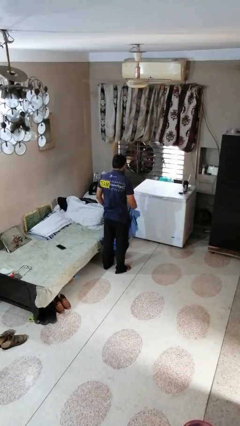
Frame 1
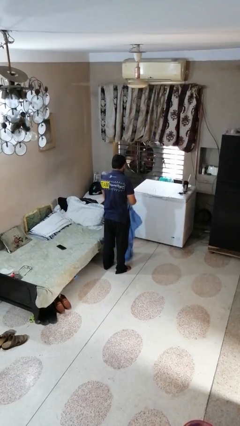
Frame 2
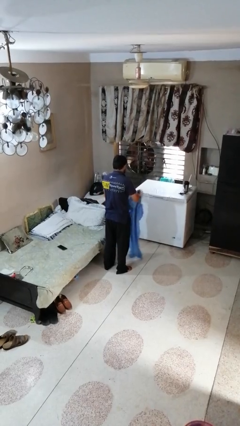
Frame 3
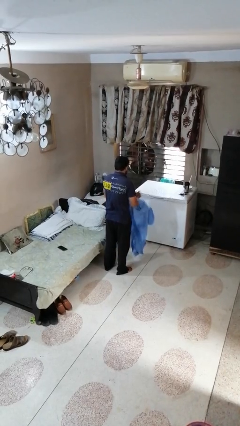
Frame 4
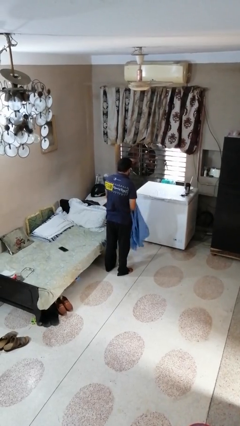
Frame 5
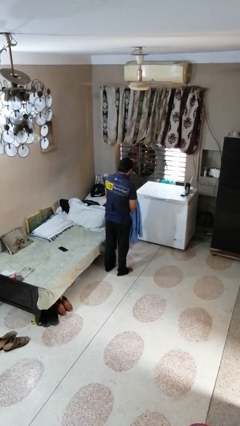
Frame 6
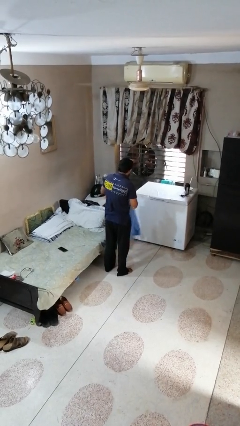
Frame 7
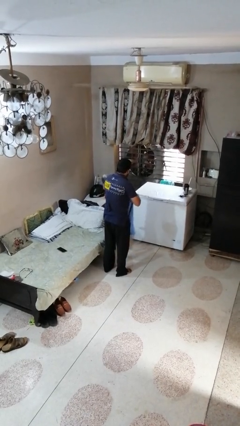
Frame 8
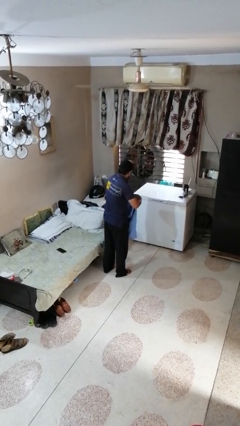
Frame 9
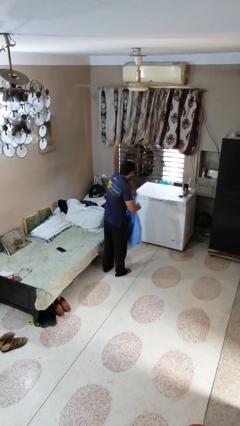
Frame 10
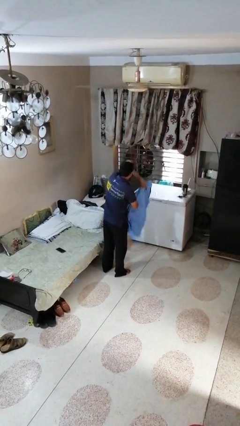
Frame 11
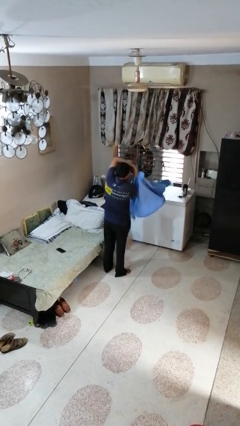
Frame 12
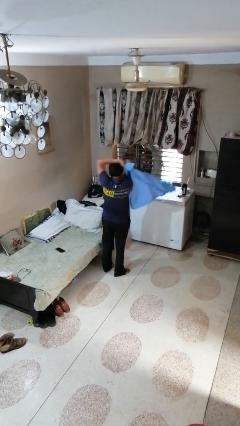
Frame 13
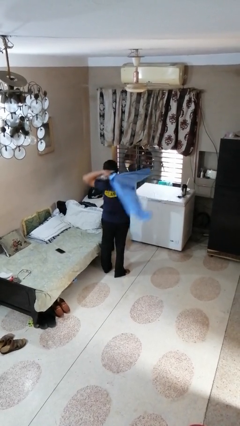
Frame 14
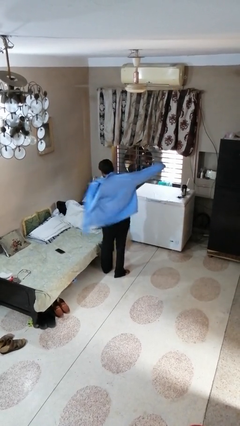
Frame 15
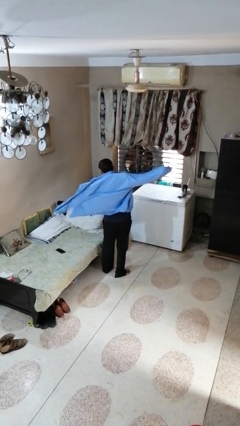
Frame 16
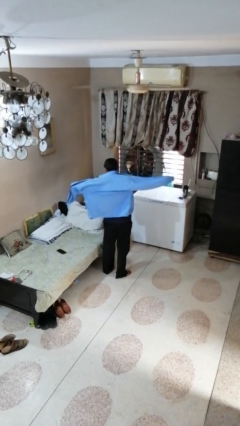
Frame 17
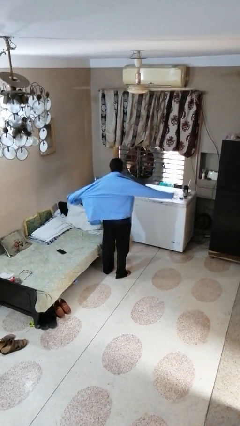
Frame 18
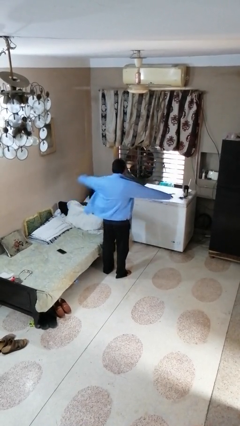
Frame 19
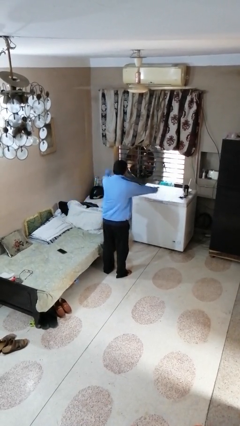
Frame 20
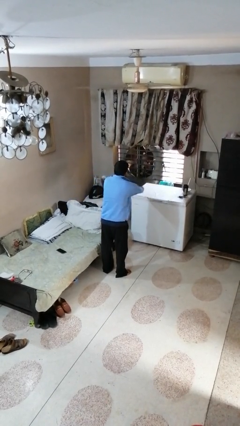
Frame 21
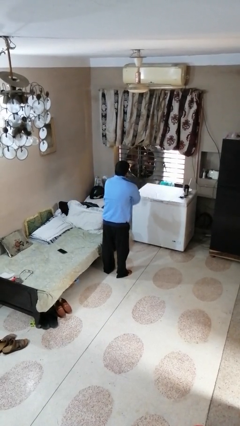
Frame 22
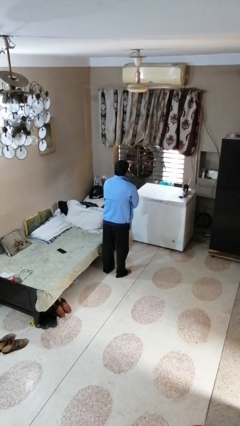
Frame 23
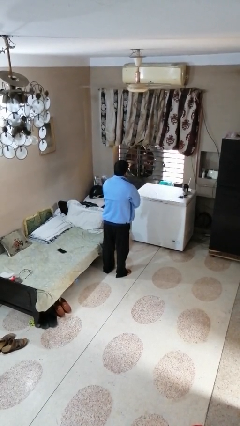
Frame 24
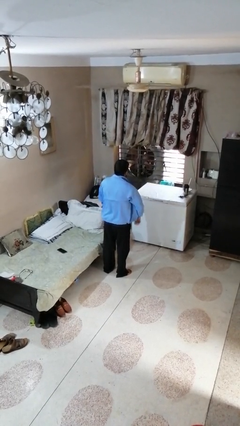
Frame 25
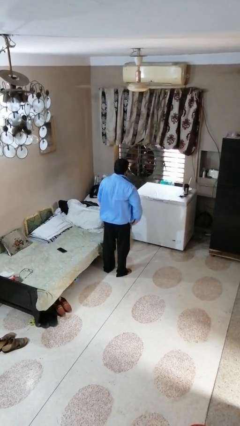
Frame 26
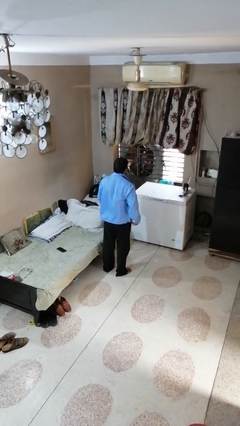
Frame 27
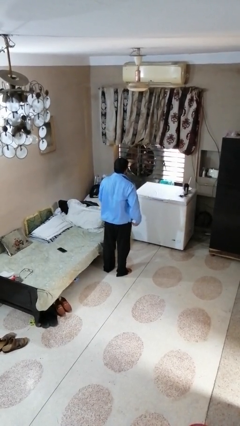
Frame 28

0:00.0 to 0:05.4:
person puts on jacket

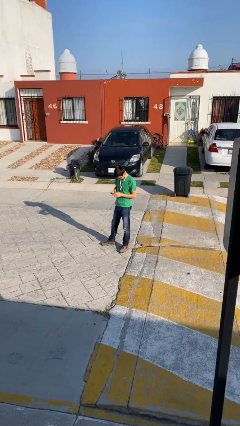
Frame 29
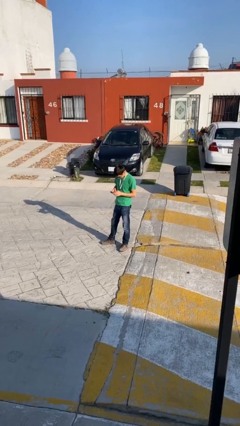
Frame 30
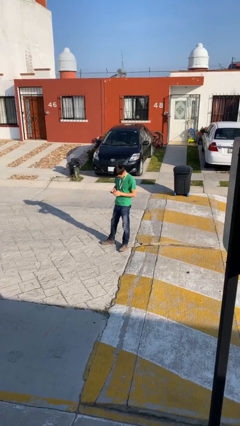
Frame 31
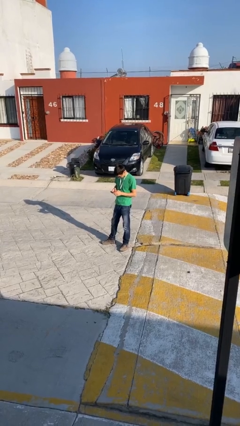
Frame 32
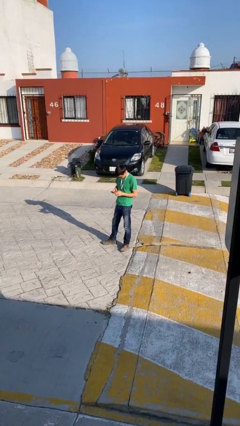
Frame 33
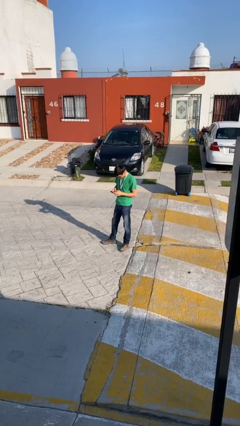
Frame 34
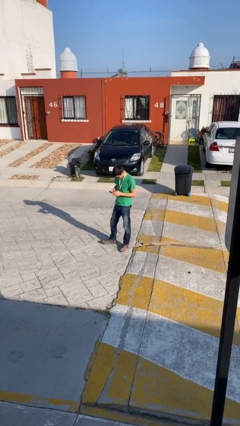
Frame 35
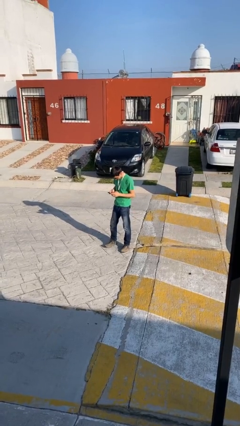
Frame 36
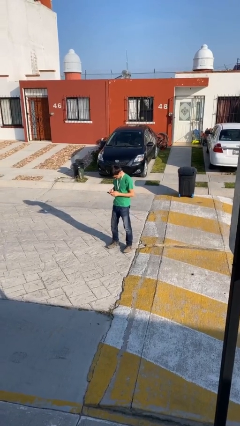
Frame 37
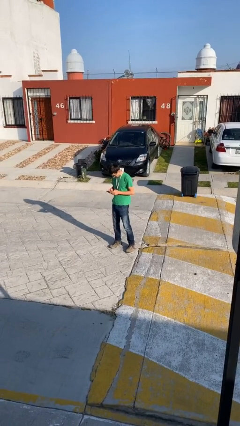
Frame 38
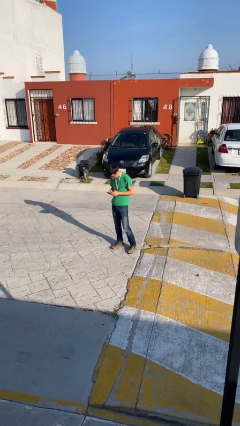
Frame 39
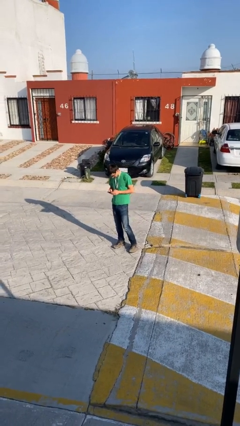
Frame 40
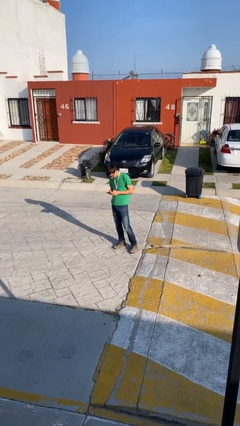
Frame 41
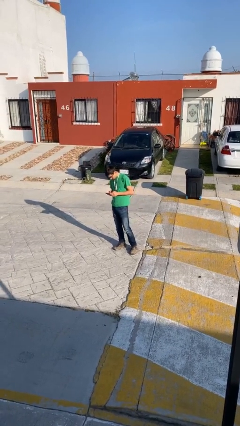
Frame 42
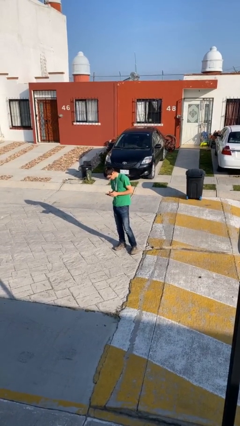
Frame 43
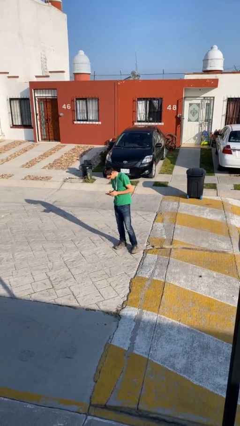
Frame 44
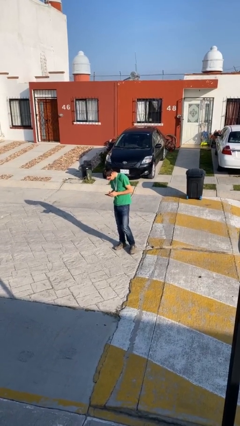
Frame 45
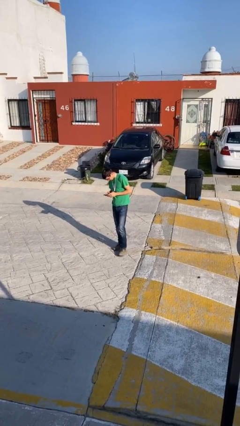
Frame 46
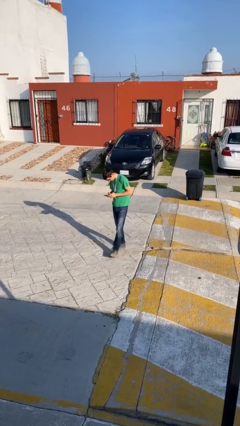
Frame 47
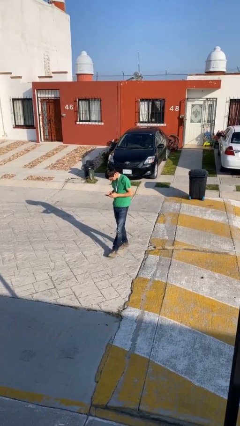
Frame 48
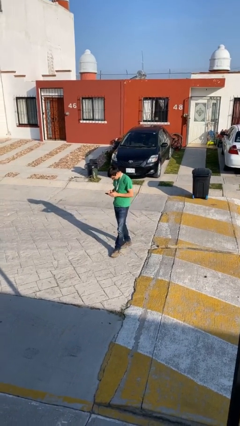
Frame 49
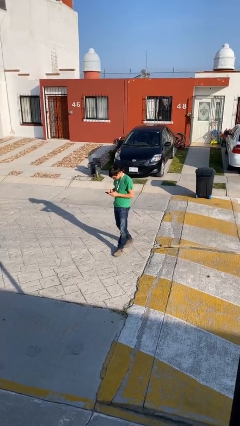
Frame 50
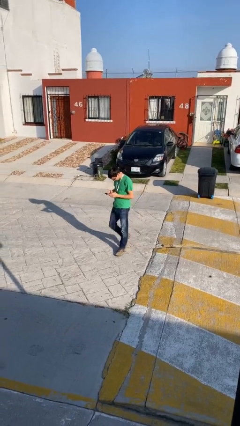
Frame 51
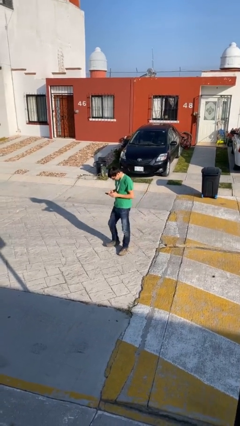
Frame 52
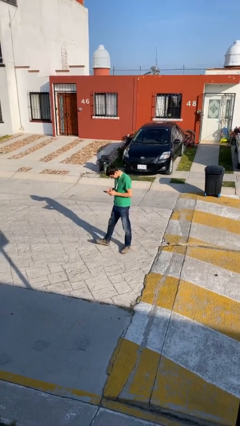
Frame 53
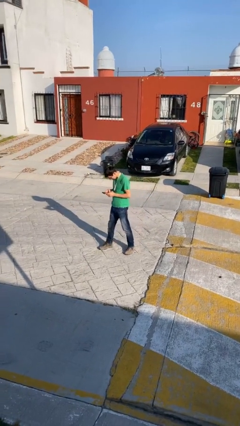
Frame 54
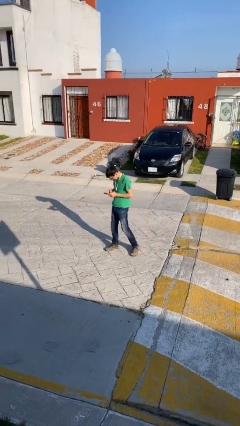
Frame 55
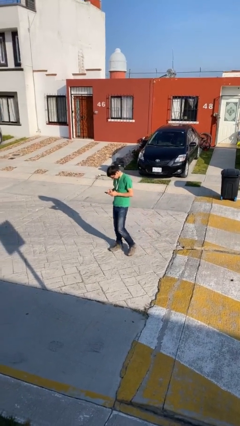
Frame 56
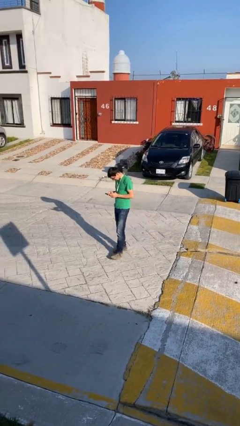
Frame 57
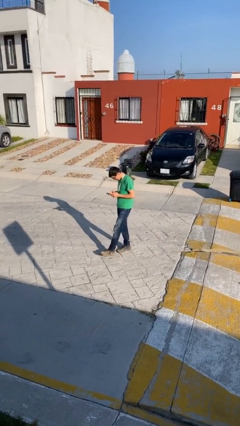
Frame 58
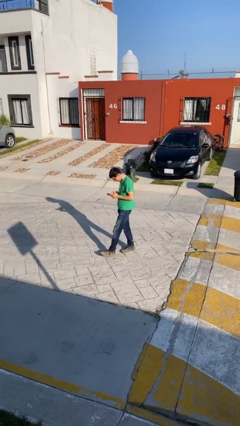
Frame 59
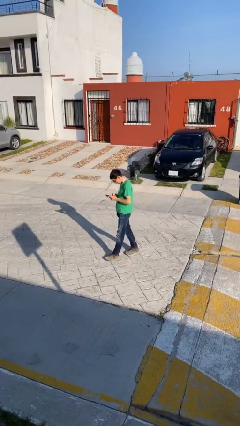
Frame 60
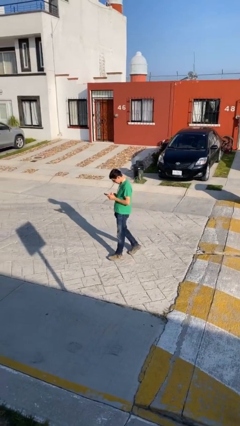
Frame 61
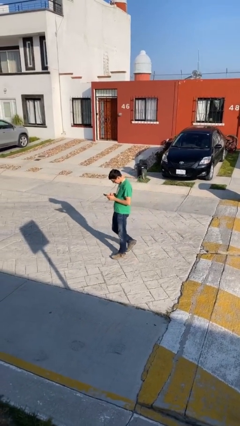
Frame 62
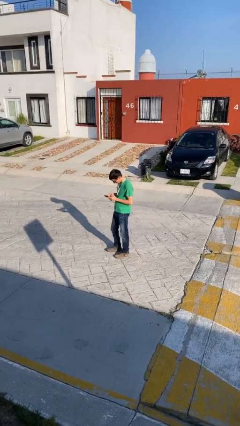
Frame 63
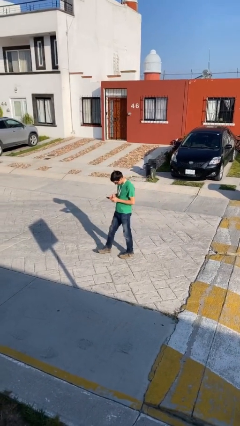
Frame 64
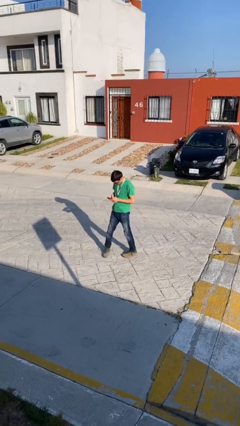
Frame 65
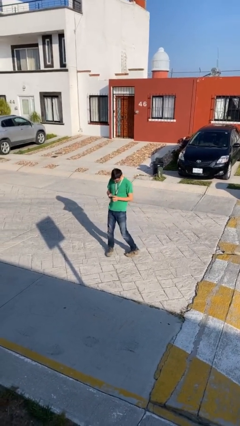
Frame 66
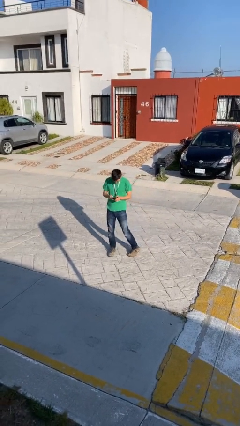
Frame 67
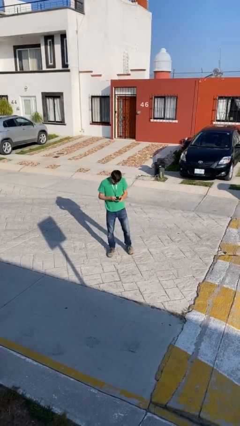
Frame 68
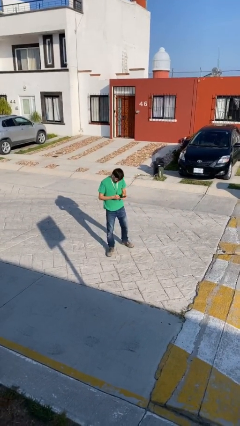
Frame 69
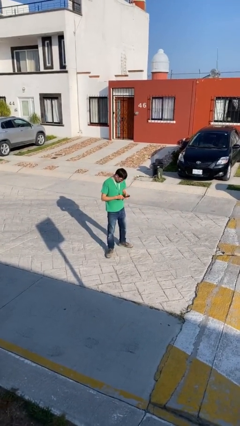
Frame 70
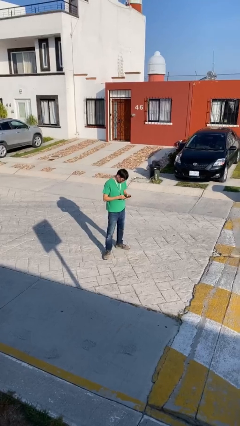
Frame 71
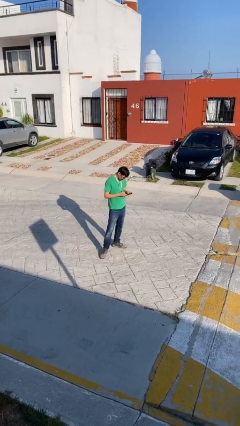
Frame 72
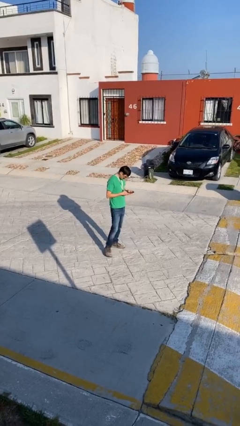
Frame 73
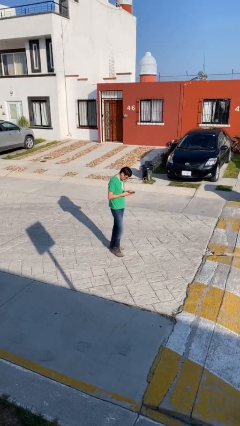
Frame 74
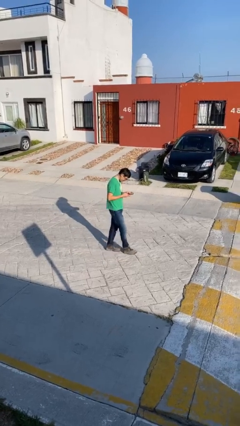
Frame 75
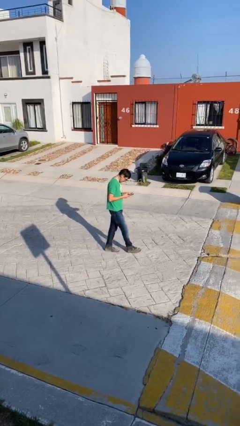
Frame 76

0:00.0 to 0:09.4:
person texts on phone

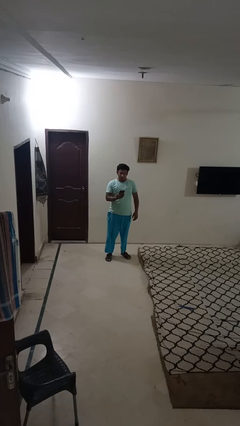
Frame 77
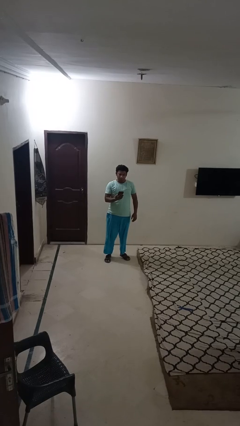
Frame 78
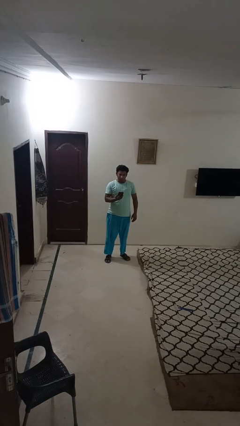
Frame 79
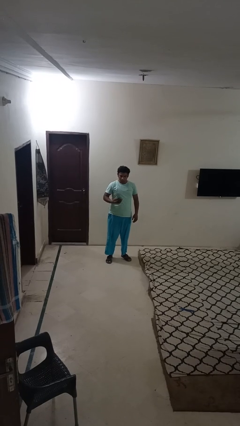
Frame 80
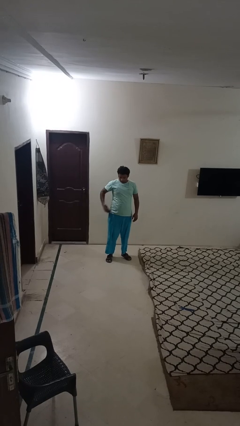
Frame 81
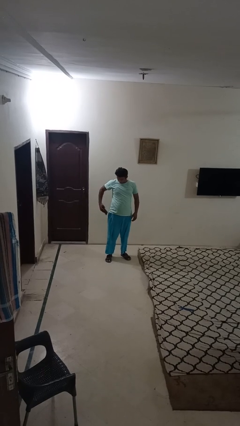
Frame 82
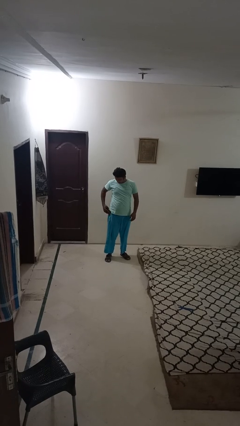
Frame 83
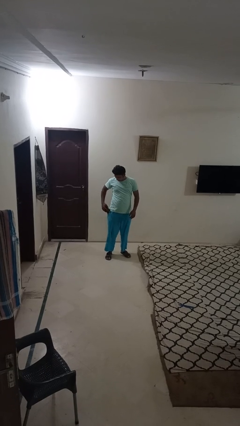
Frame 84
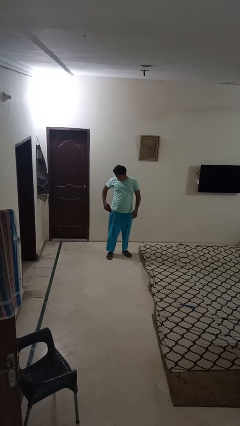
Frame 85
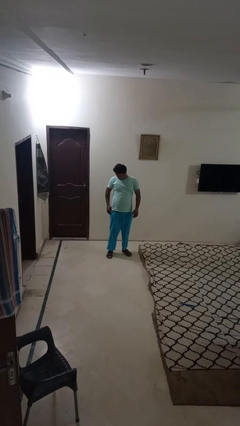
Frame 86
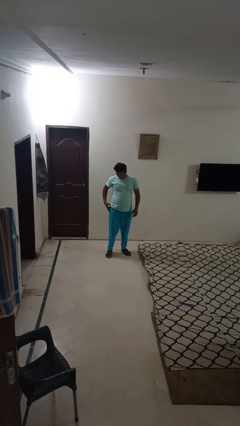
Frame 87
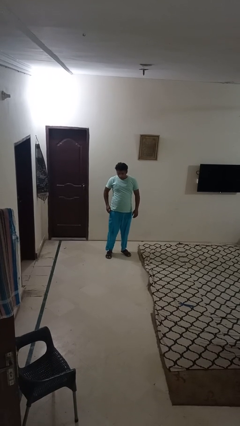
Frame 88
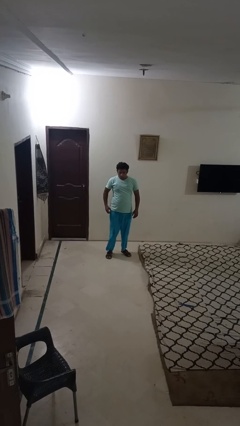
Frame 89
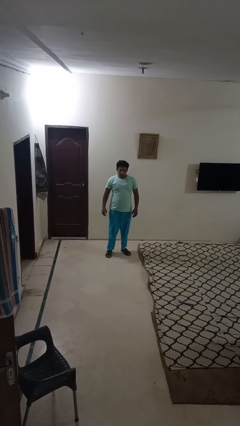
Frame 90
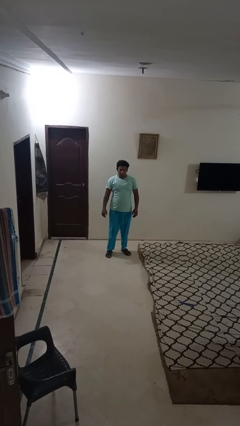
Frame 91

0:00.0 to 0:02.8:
person puts phone into pocket

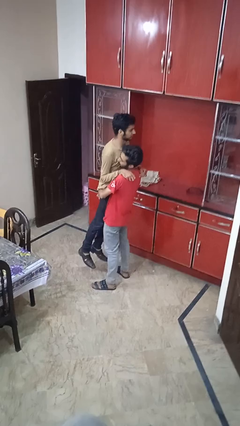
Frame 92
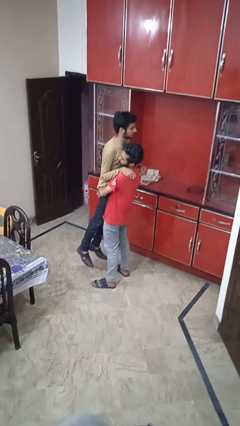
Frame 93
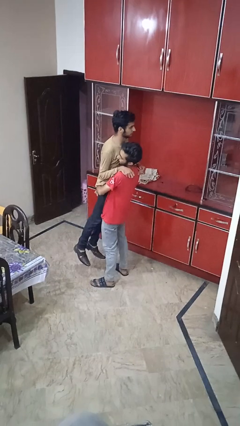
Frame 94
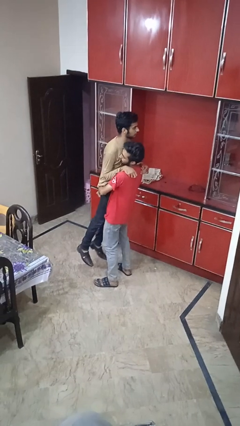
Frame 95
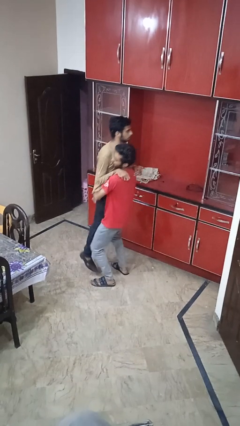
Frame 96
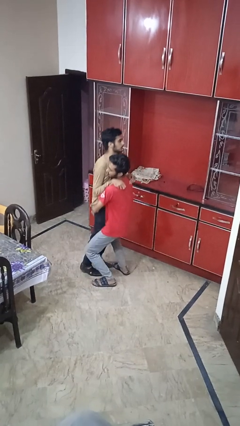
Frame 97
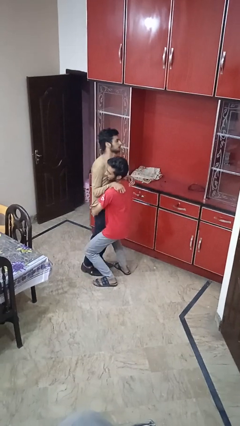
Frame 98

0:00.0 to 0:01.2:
person puts down person
